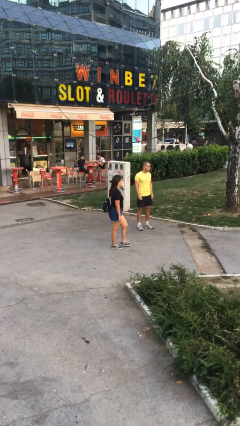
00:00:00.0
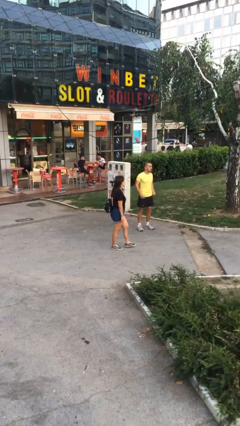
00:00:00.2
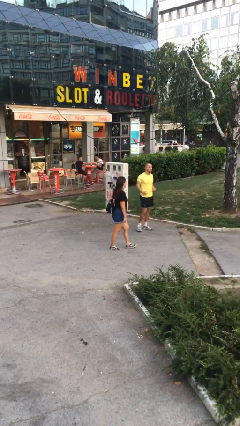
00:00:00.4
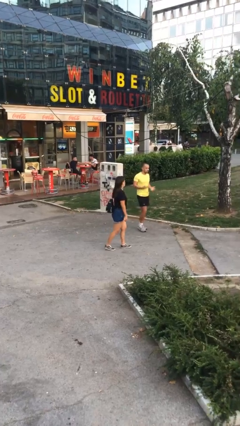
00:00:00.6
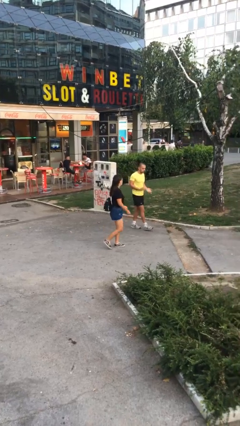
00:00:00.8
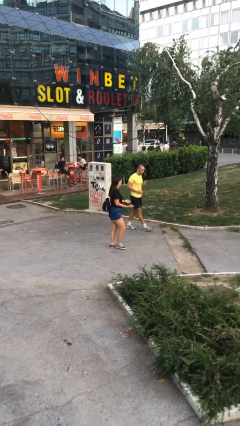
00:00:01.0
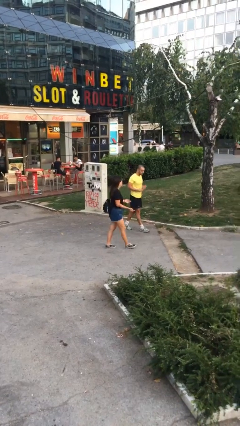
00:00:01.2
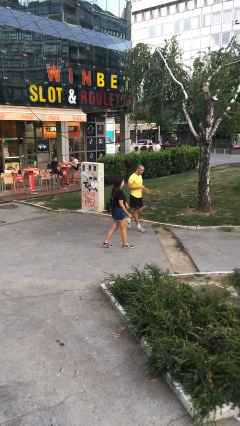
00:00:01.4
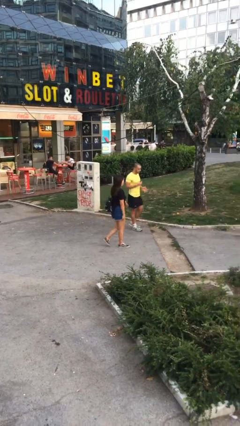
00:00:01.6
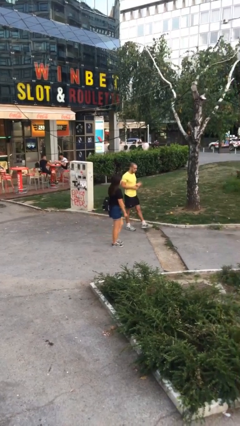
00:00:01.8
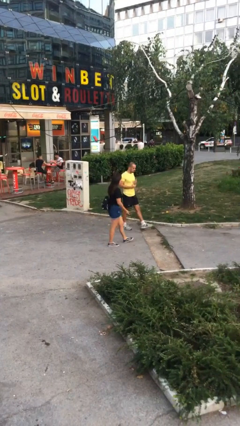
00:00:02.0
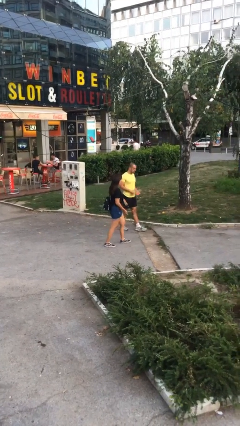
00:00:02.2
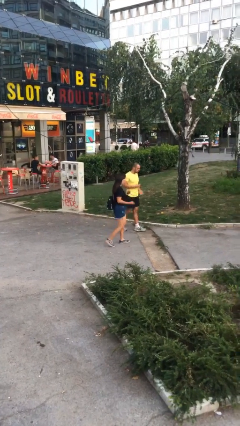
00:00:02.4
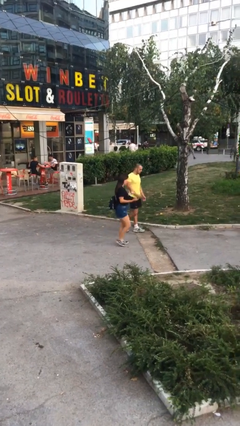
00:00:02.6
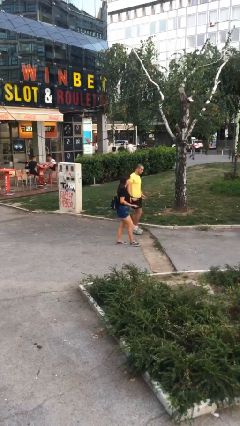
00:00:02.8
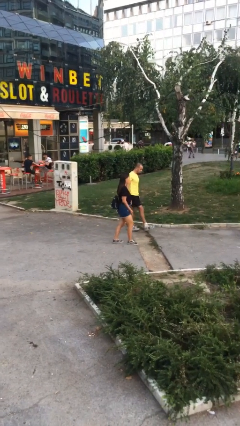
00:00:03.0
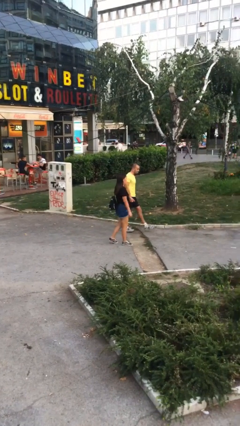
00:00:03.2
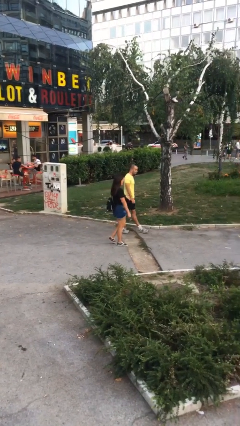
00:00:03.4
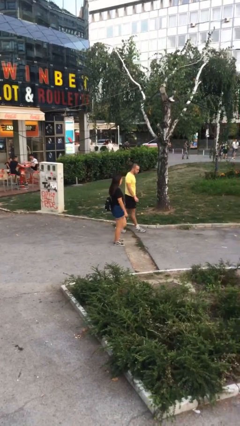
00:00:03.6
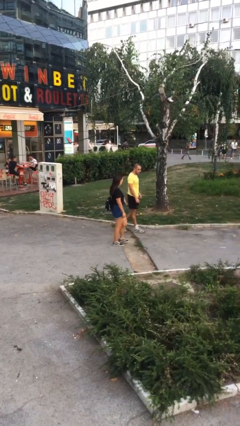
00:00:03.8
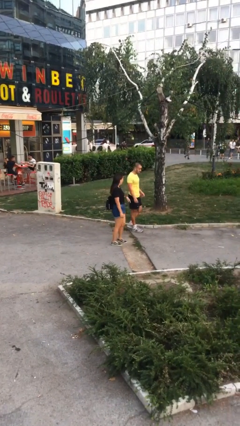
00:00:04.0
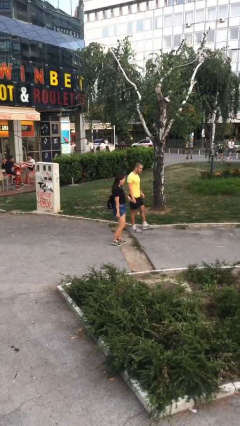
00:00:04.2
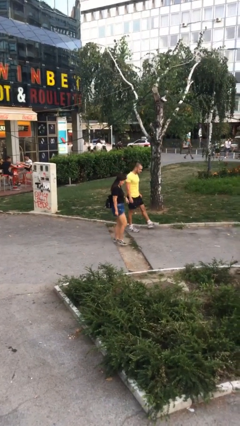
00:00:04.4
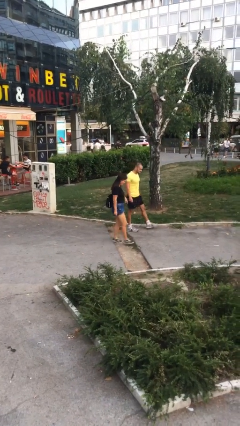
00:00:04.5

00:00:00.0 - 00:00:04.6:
person talks to person

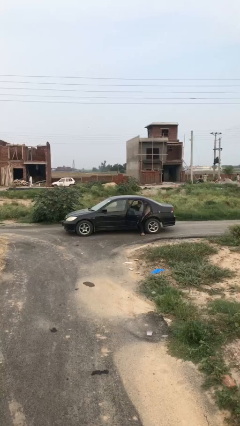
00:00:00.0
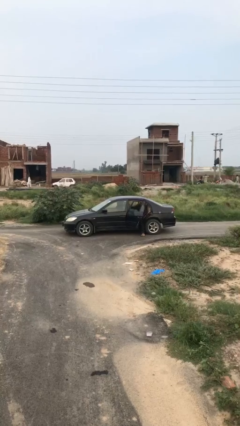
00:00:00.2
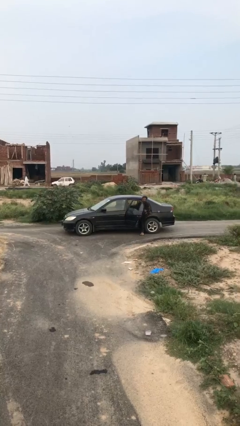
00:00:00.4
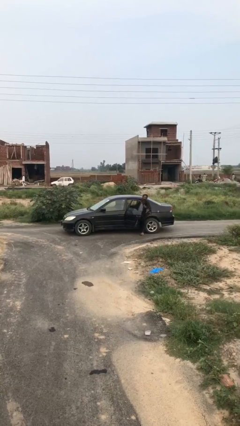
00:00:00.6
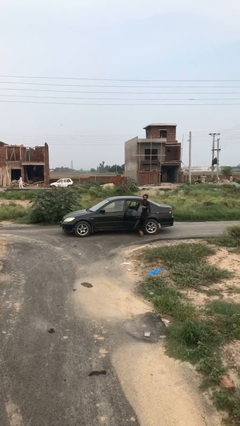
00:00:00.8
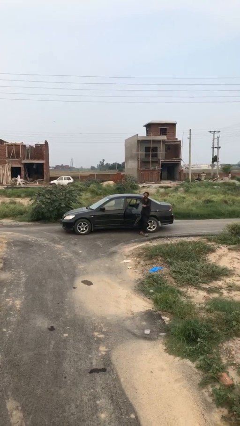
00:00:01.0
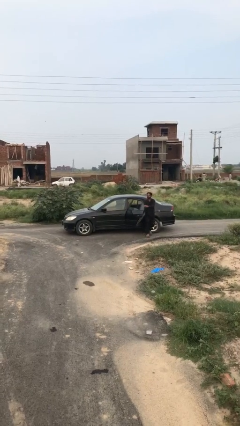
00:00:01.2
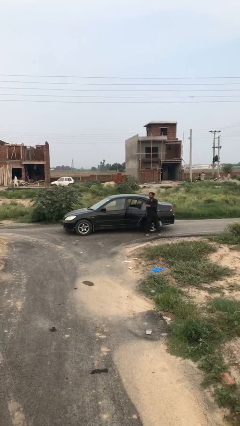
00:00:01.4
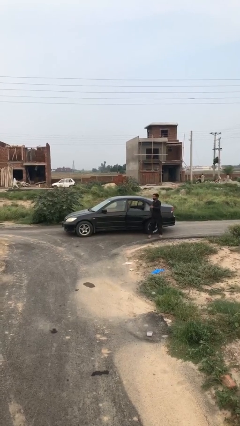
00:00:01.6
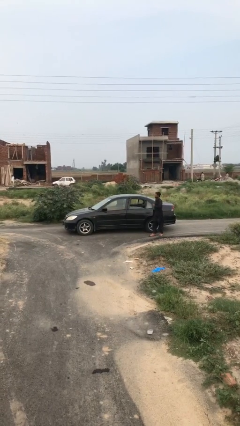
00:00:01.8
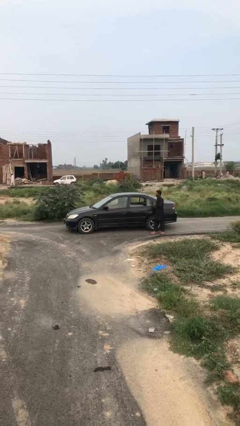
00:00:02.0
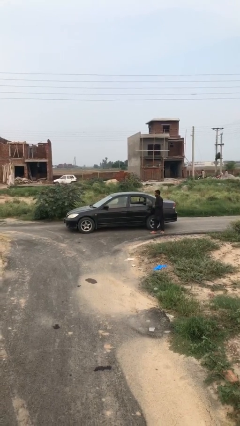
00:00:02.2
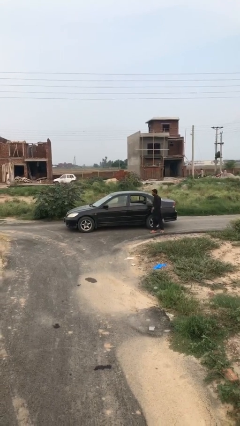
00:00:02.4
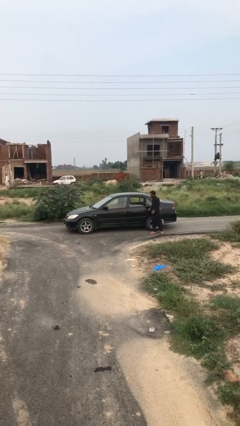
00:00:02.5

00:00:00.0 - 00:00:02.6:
car drops off person

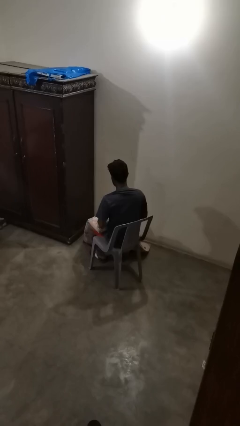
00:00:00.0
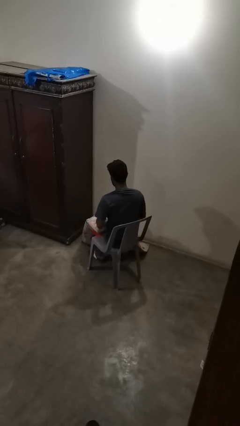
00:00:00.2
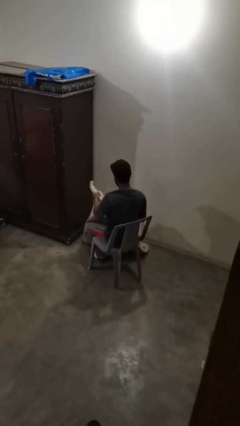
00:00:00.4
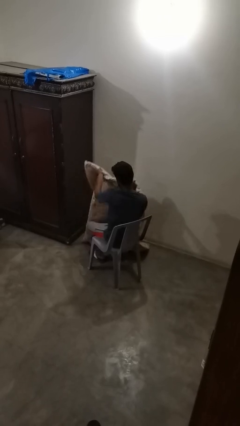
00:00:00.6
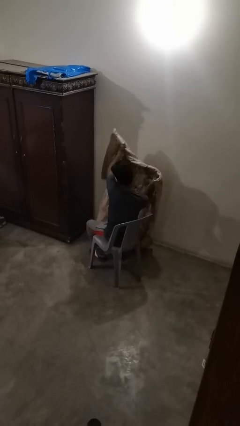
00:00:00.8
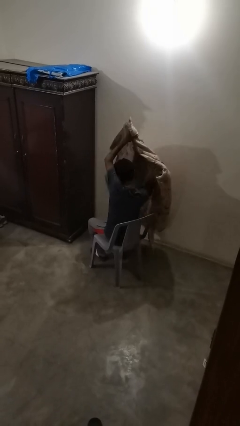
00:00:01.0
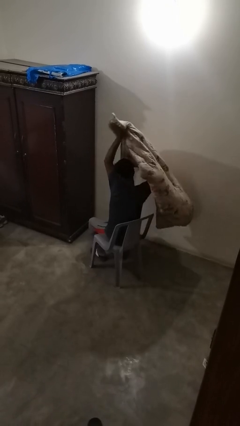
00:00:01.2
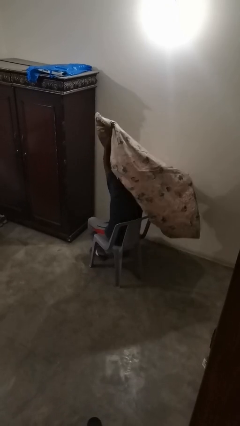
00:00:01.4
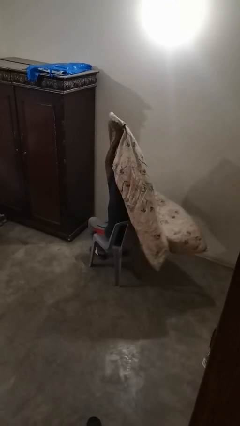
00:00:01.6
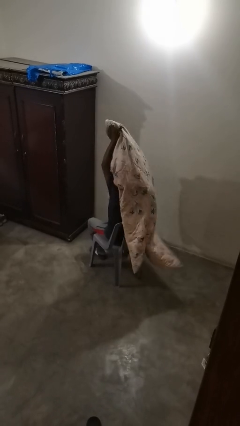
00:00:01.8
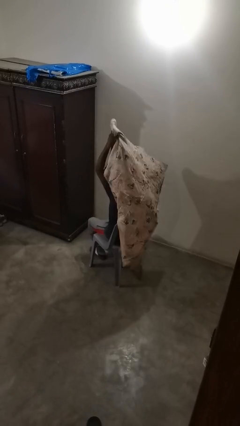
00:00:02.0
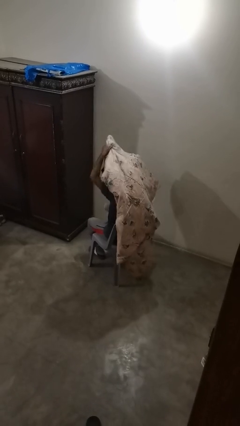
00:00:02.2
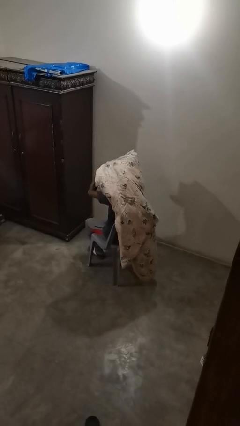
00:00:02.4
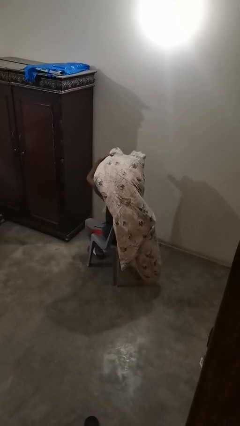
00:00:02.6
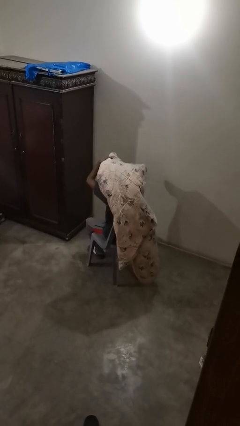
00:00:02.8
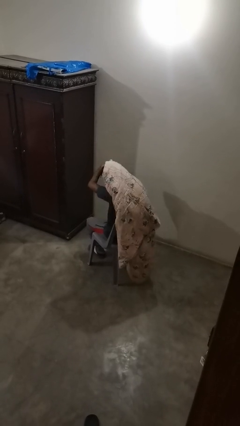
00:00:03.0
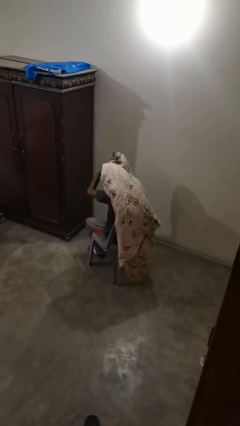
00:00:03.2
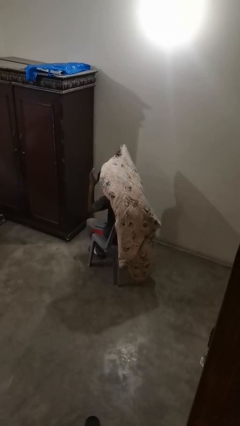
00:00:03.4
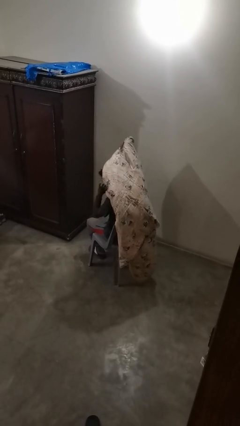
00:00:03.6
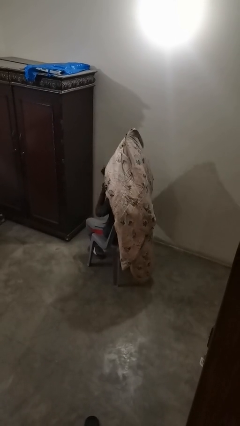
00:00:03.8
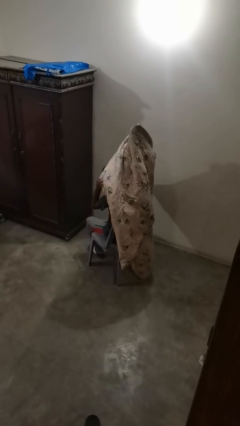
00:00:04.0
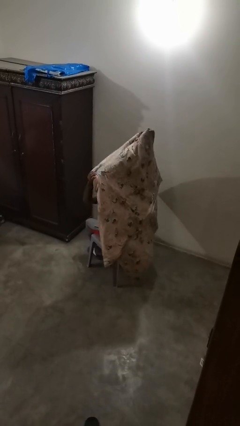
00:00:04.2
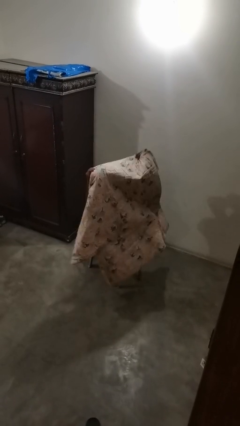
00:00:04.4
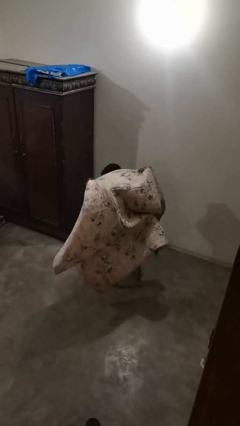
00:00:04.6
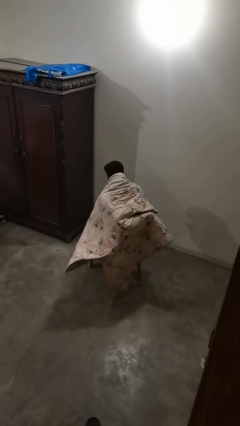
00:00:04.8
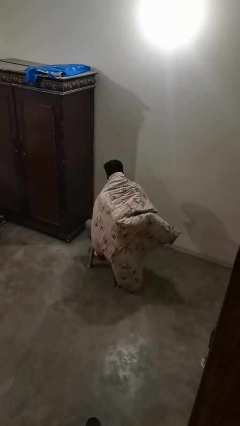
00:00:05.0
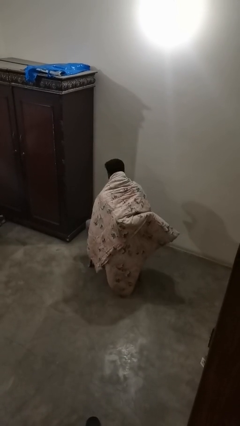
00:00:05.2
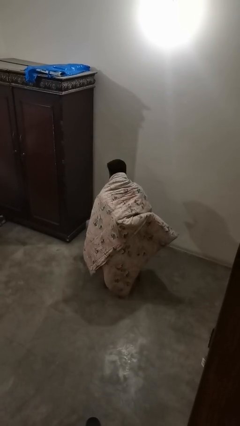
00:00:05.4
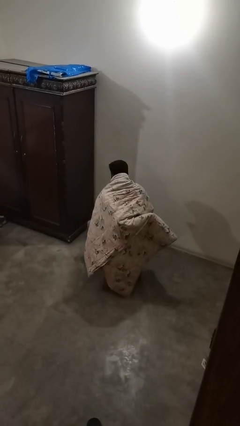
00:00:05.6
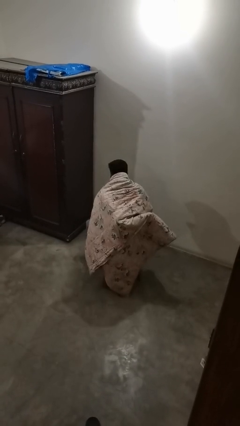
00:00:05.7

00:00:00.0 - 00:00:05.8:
person covers with blanket

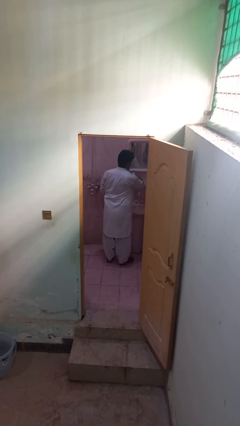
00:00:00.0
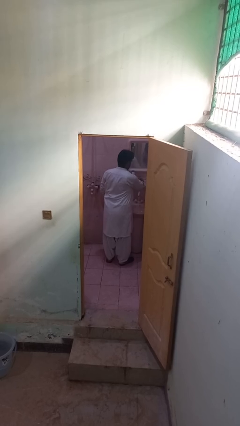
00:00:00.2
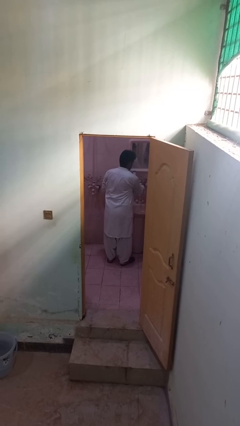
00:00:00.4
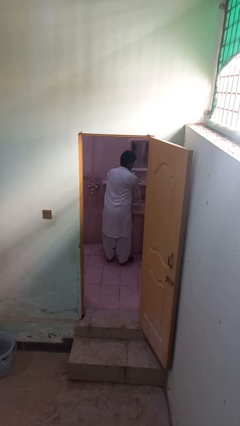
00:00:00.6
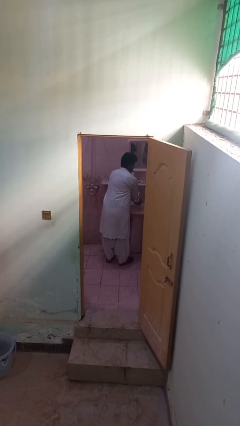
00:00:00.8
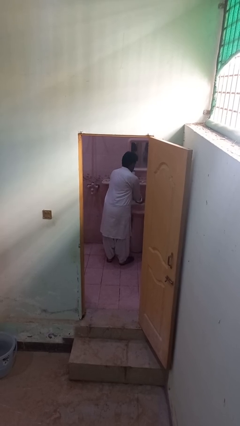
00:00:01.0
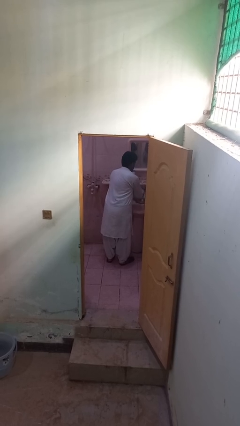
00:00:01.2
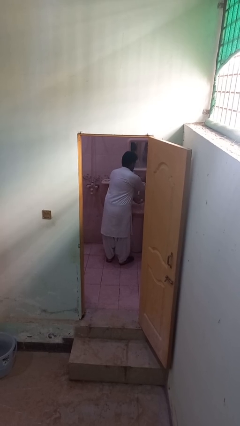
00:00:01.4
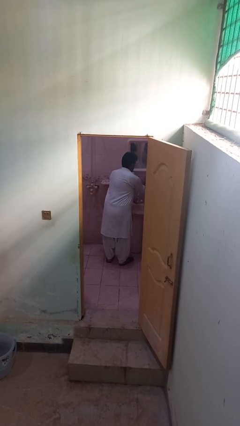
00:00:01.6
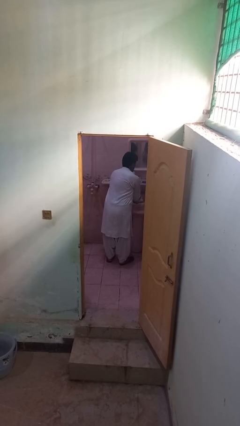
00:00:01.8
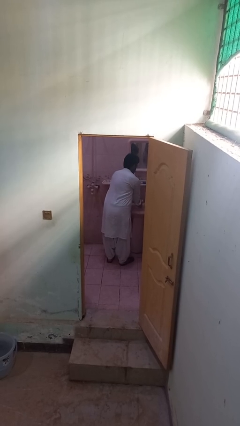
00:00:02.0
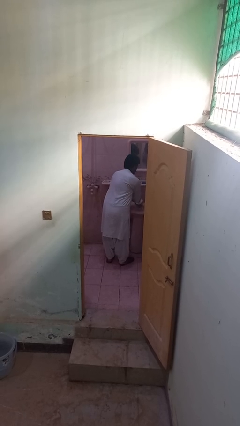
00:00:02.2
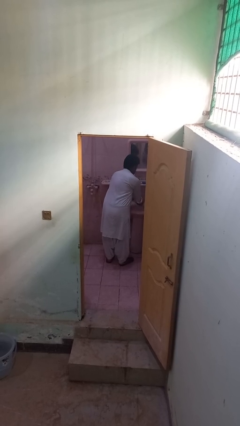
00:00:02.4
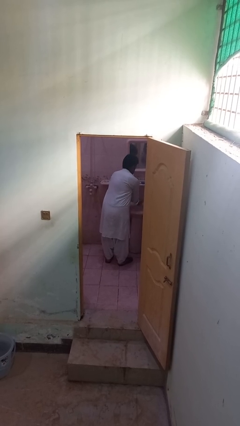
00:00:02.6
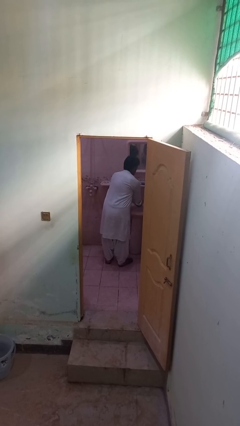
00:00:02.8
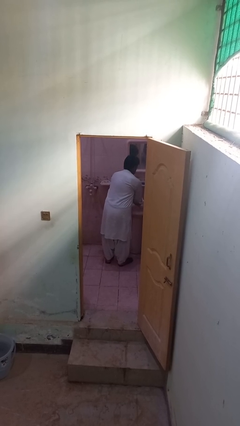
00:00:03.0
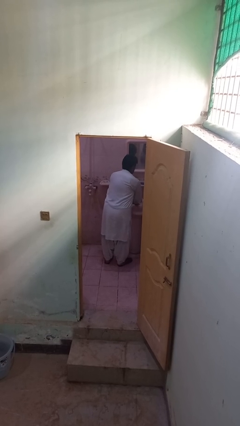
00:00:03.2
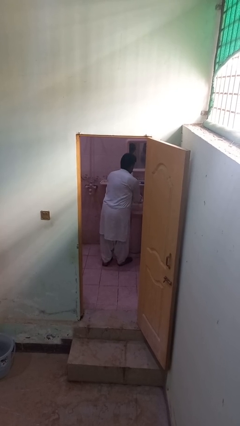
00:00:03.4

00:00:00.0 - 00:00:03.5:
person washes hands

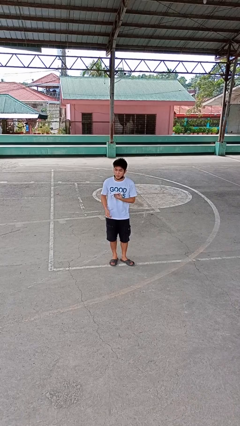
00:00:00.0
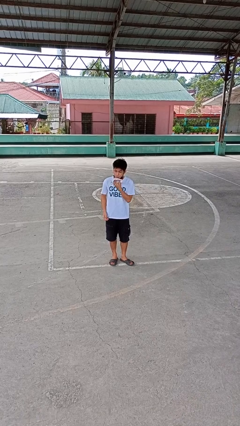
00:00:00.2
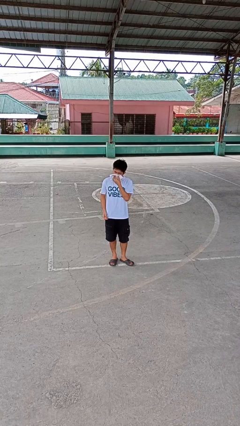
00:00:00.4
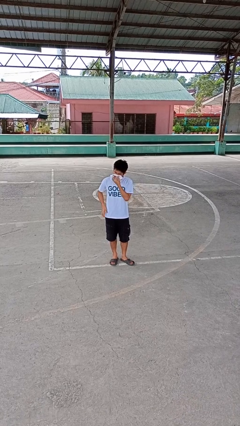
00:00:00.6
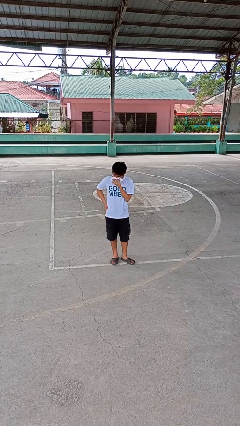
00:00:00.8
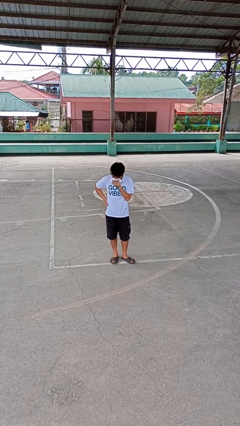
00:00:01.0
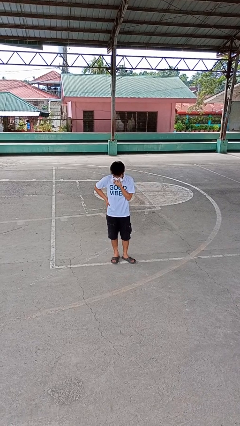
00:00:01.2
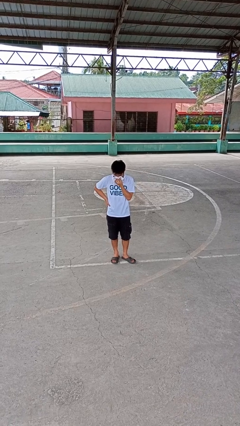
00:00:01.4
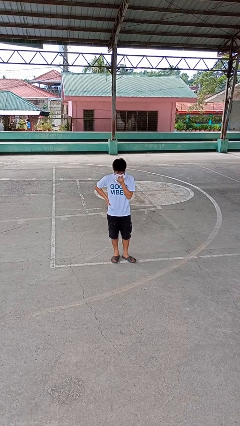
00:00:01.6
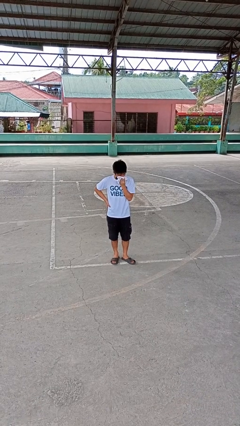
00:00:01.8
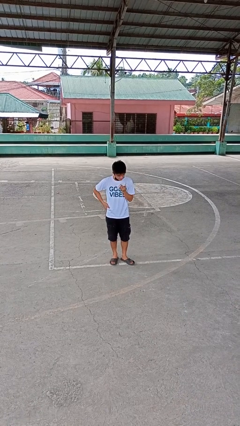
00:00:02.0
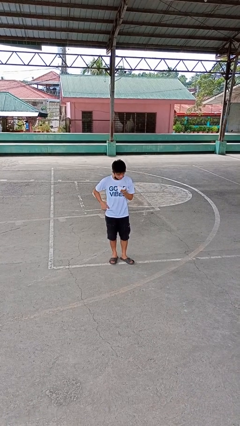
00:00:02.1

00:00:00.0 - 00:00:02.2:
person blows nose
